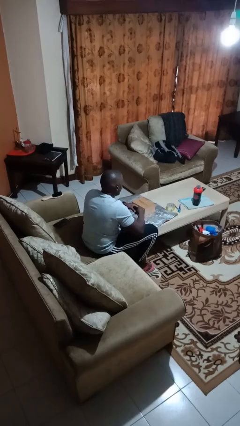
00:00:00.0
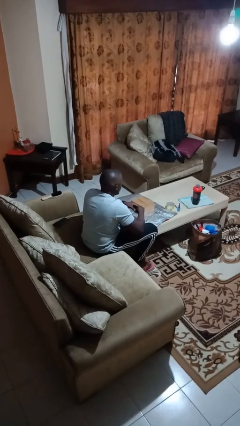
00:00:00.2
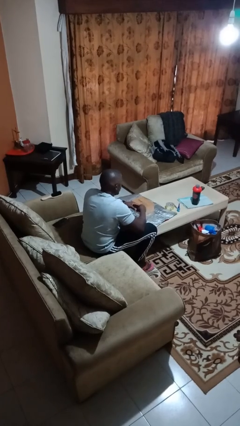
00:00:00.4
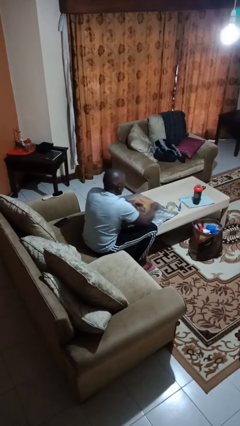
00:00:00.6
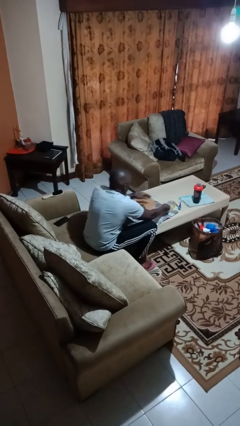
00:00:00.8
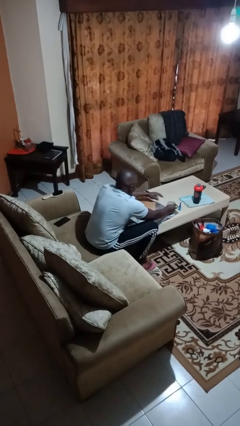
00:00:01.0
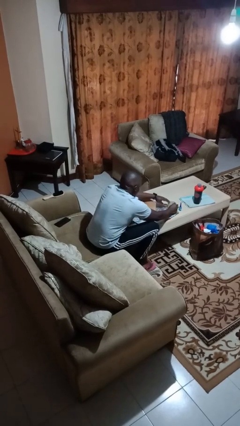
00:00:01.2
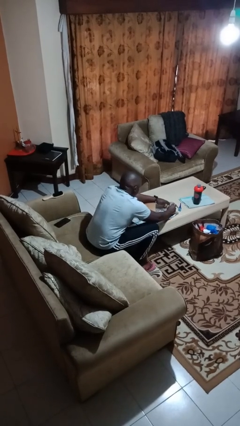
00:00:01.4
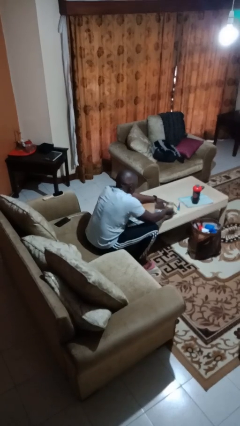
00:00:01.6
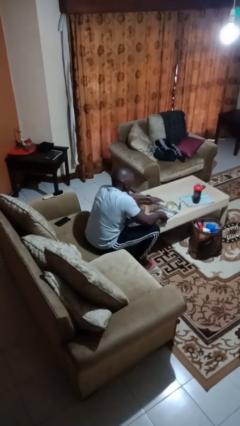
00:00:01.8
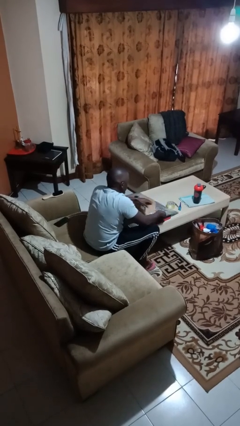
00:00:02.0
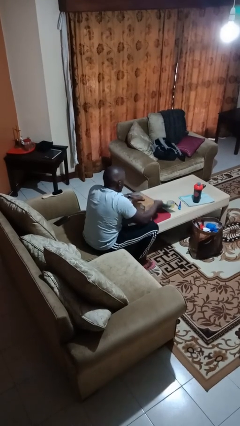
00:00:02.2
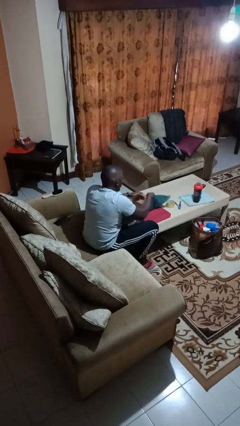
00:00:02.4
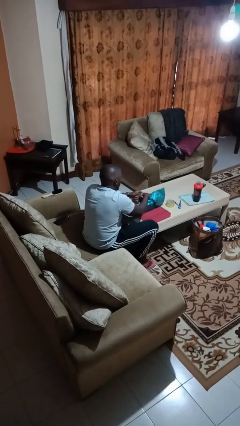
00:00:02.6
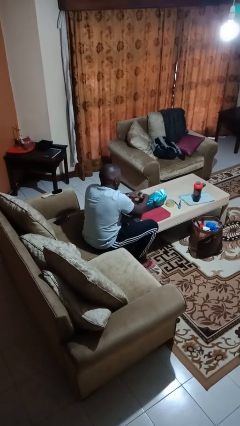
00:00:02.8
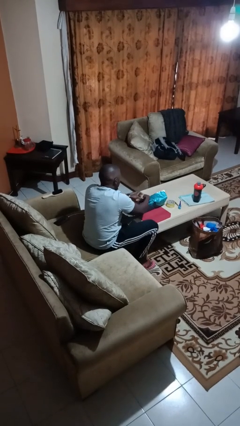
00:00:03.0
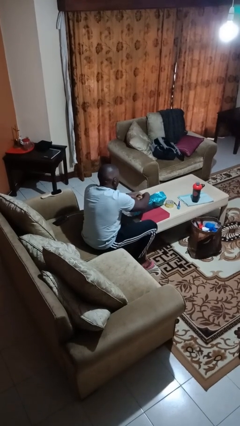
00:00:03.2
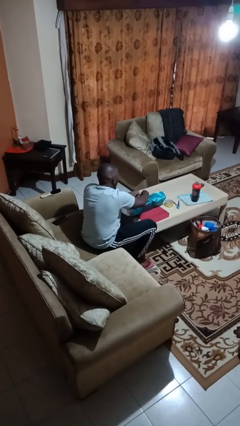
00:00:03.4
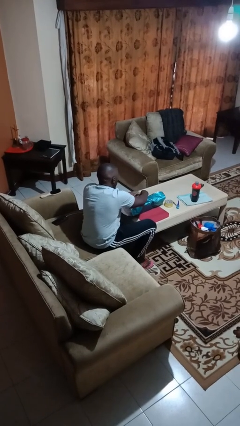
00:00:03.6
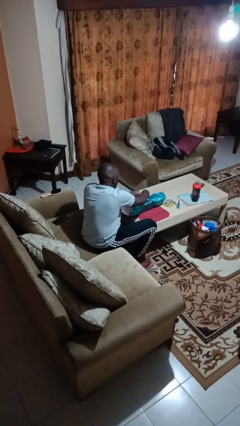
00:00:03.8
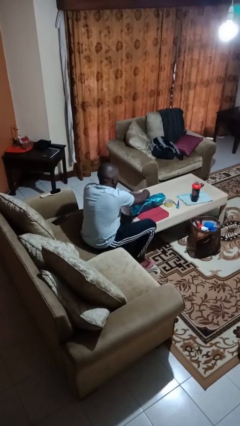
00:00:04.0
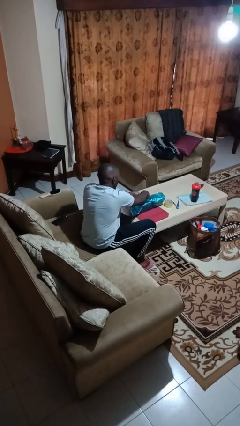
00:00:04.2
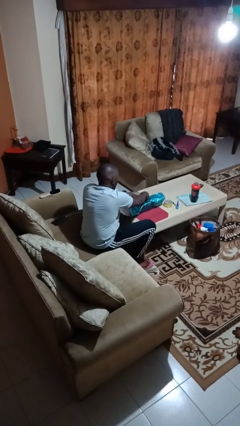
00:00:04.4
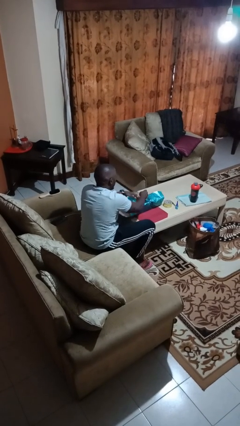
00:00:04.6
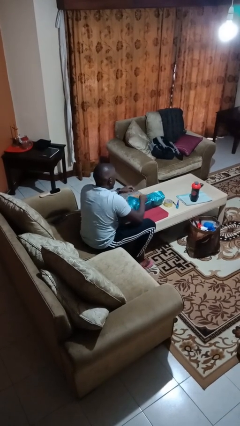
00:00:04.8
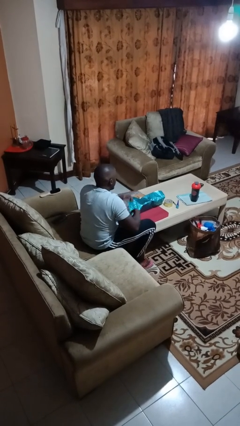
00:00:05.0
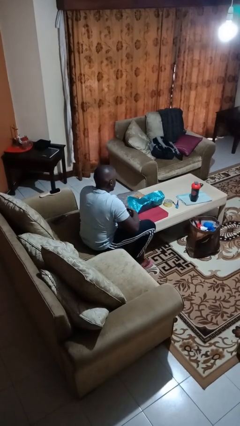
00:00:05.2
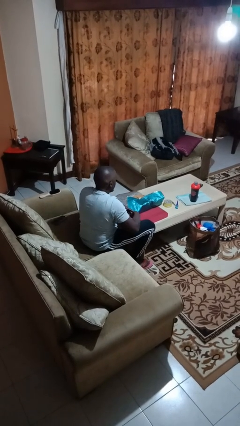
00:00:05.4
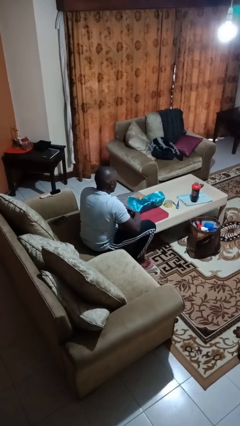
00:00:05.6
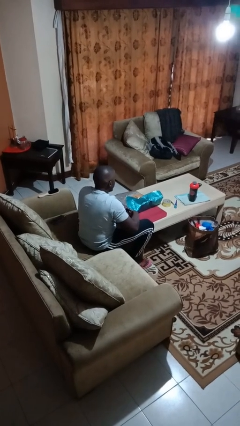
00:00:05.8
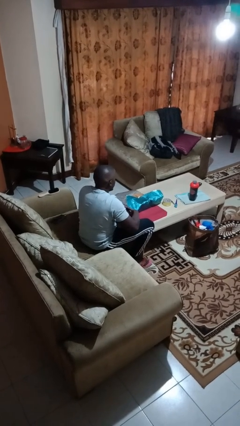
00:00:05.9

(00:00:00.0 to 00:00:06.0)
person wraps box

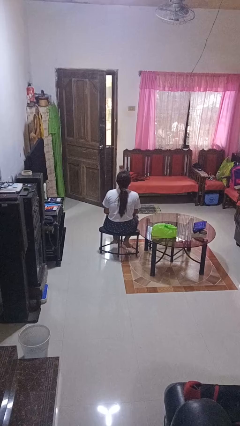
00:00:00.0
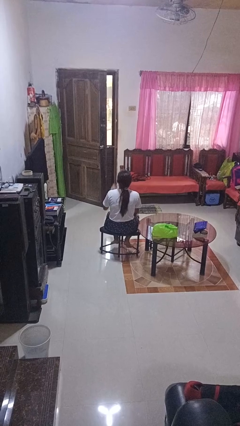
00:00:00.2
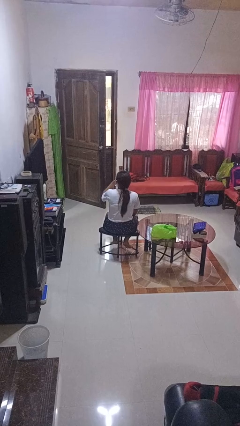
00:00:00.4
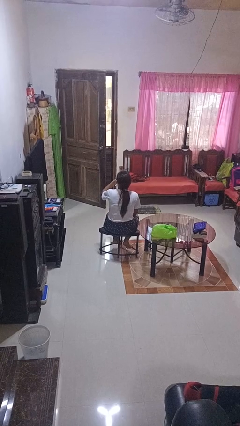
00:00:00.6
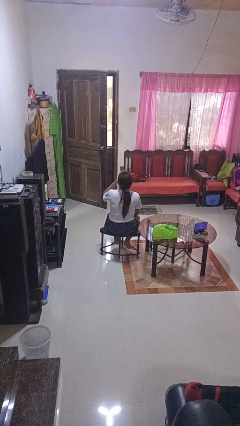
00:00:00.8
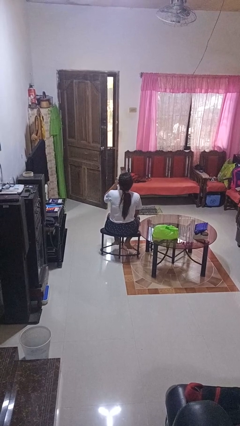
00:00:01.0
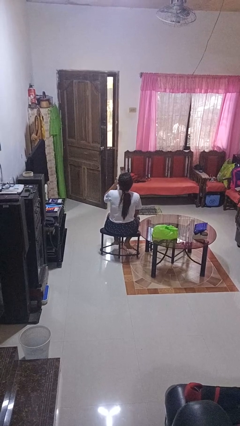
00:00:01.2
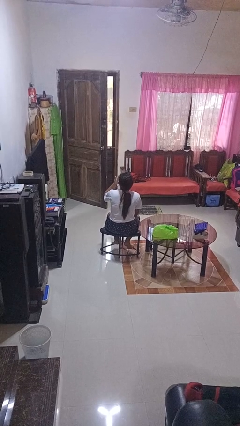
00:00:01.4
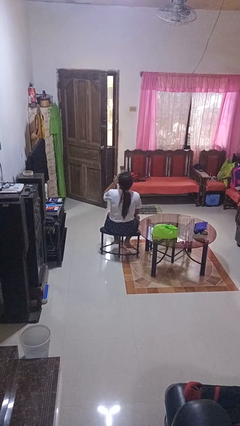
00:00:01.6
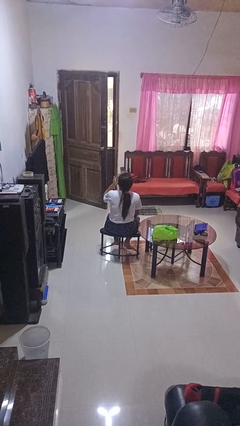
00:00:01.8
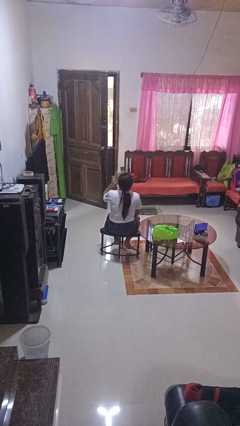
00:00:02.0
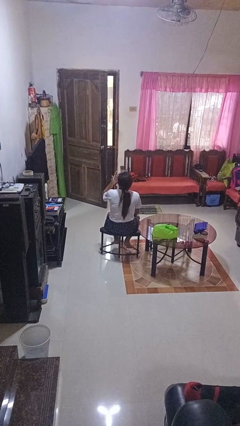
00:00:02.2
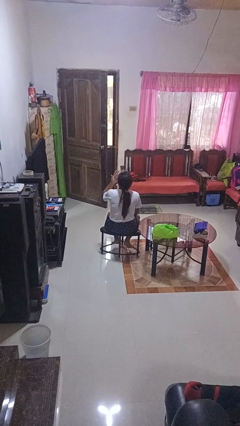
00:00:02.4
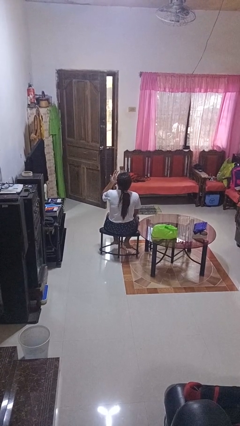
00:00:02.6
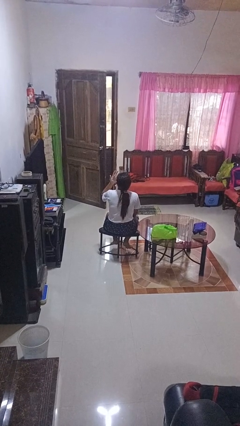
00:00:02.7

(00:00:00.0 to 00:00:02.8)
person licks fingers

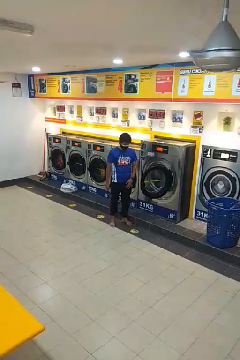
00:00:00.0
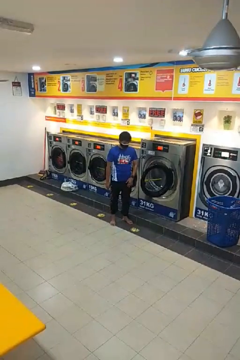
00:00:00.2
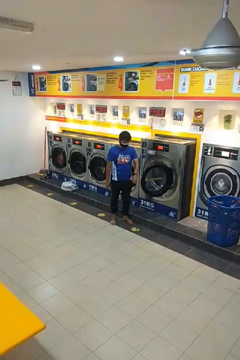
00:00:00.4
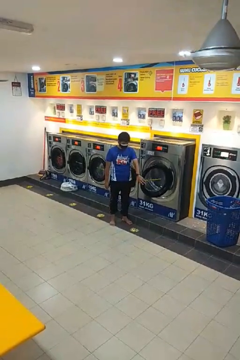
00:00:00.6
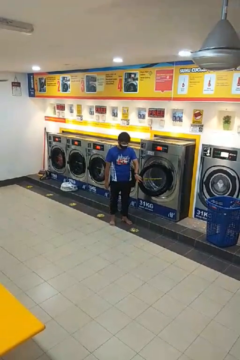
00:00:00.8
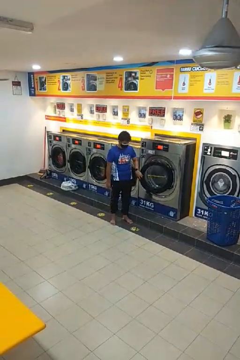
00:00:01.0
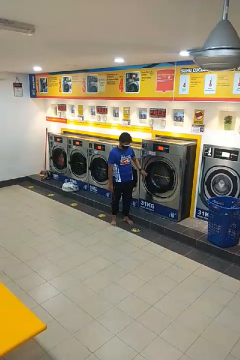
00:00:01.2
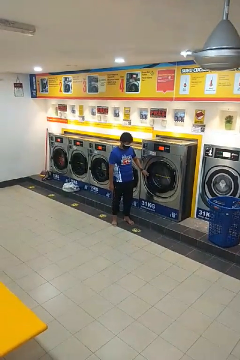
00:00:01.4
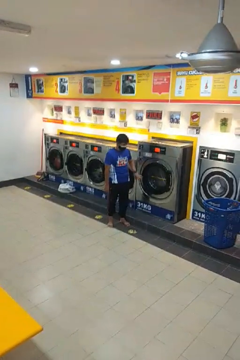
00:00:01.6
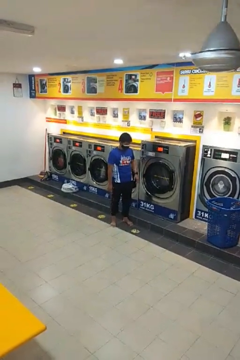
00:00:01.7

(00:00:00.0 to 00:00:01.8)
person closes clothes washer

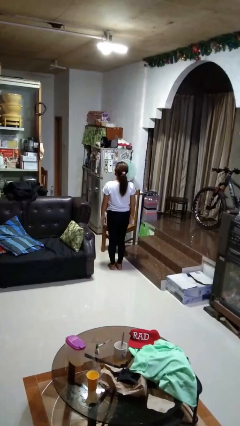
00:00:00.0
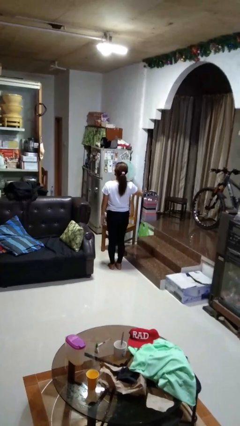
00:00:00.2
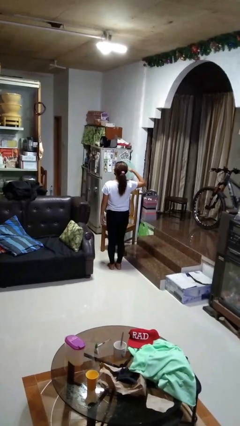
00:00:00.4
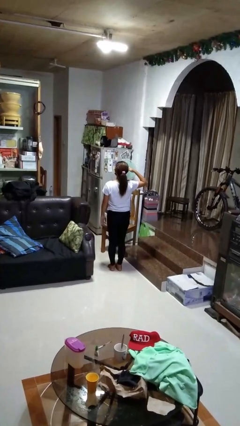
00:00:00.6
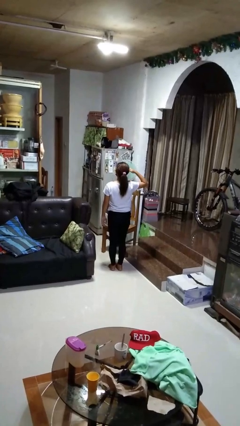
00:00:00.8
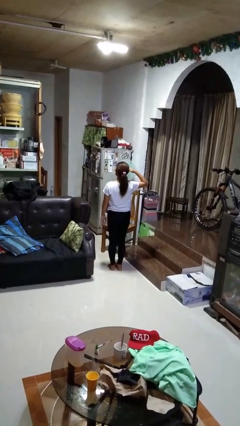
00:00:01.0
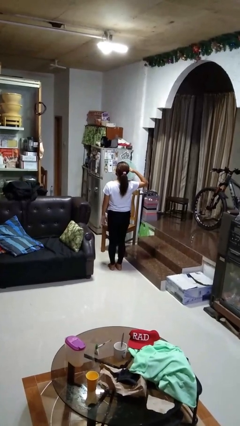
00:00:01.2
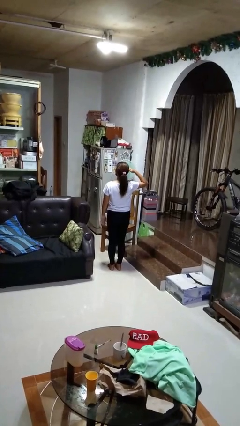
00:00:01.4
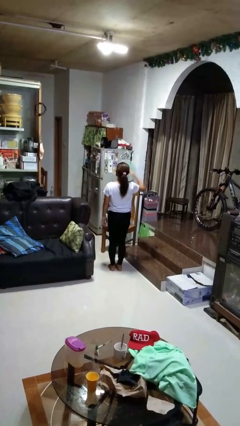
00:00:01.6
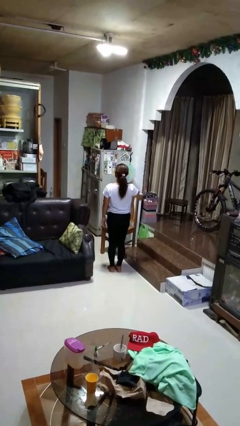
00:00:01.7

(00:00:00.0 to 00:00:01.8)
person salutes

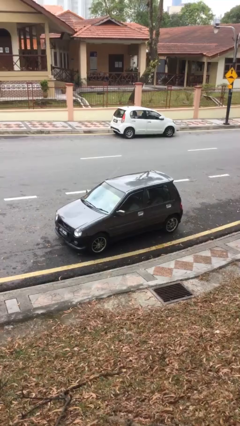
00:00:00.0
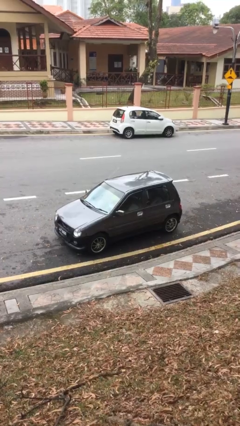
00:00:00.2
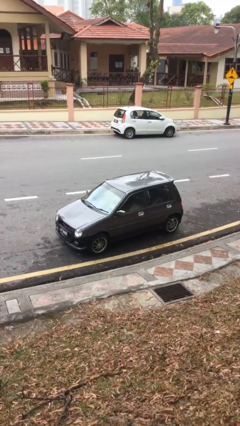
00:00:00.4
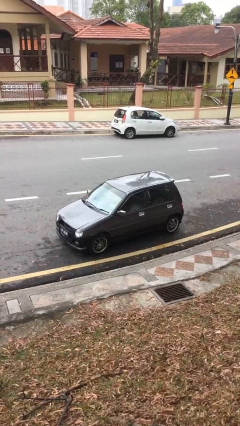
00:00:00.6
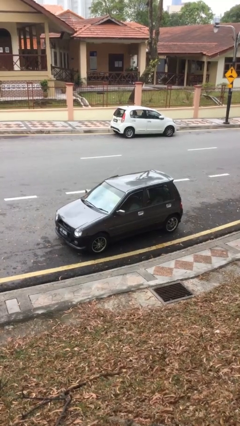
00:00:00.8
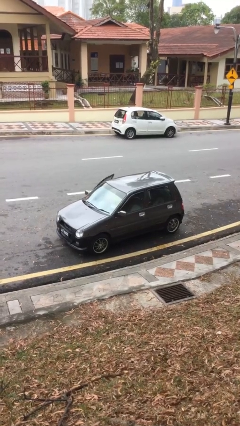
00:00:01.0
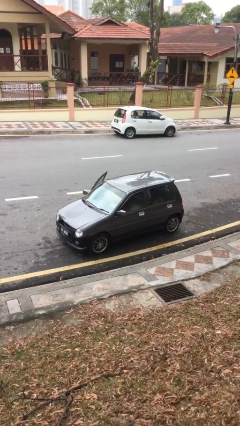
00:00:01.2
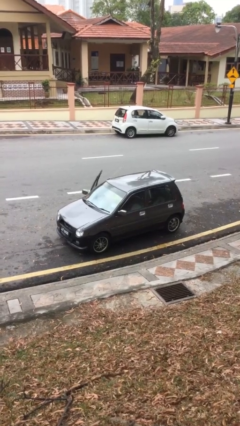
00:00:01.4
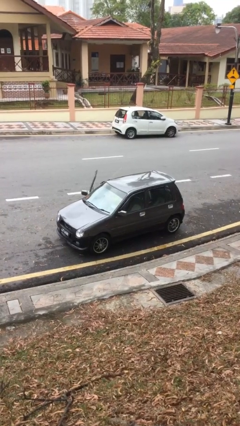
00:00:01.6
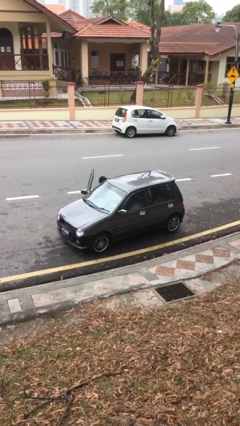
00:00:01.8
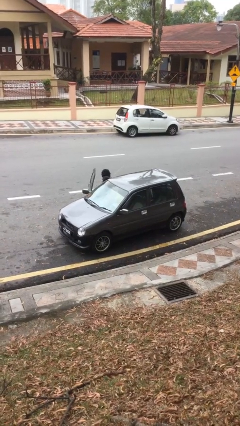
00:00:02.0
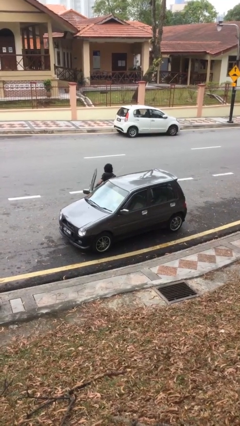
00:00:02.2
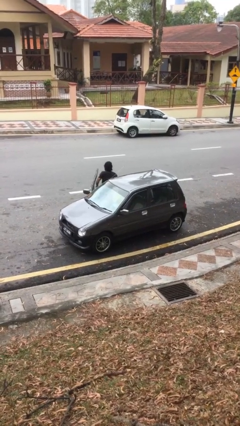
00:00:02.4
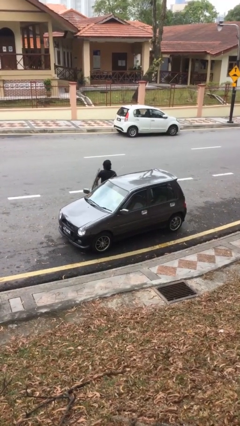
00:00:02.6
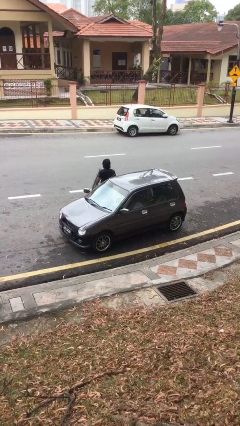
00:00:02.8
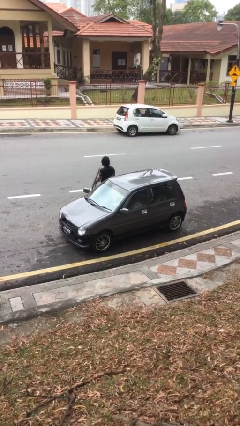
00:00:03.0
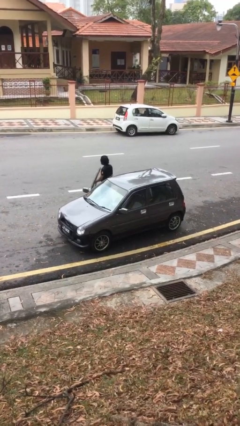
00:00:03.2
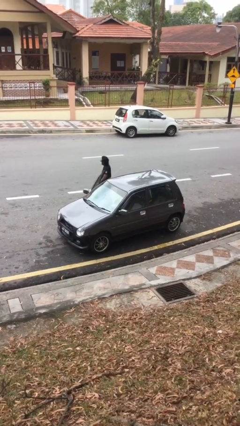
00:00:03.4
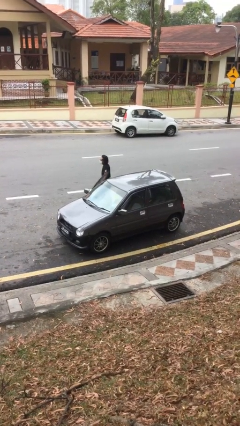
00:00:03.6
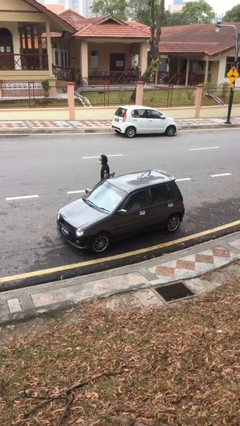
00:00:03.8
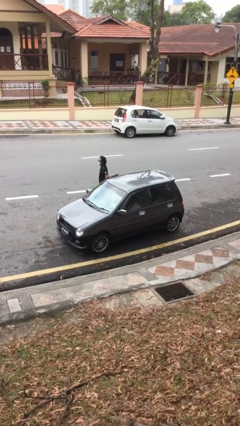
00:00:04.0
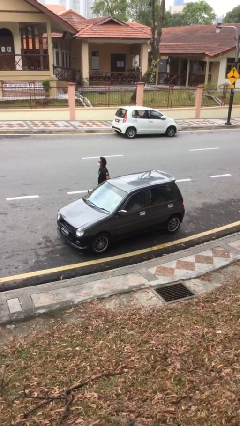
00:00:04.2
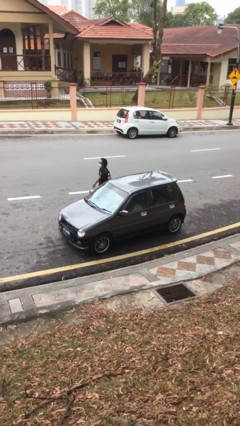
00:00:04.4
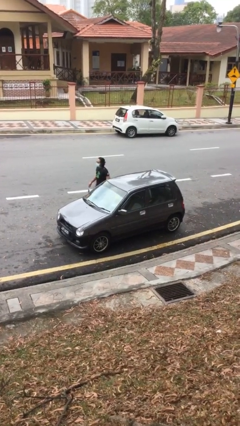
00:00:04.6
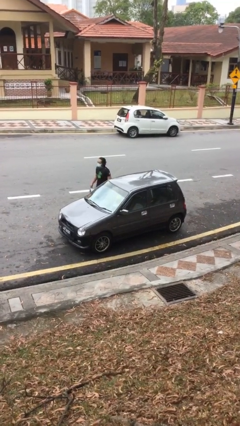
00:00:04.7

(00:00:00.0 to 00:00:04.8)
car drops off person

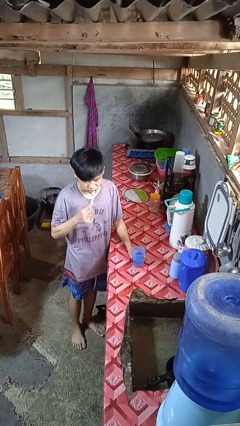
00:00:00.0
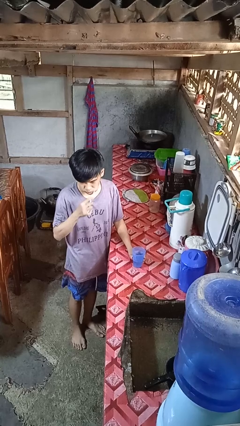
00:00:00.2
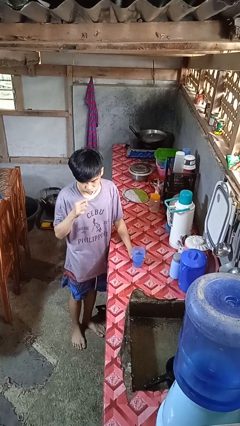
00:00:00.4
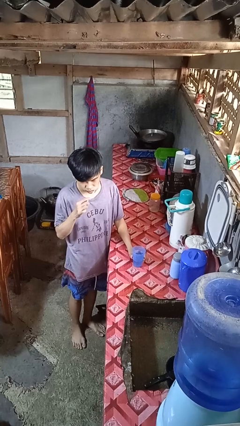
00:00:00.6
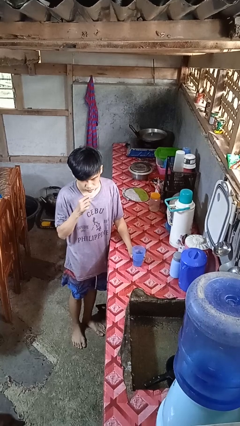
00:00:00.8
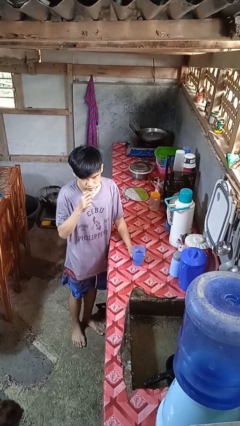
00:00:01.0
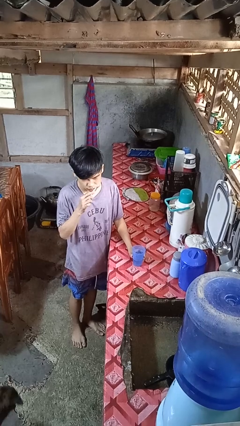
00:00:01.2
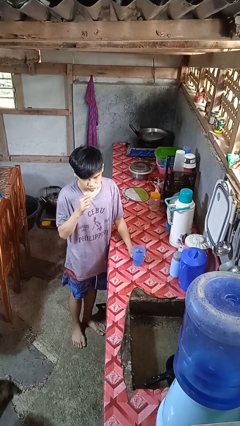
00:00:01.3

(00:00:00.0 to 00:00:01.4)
person brushes teeth
